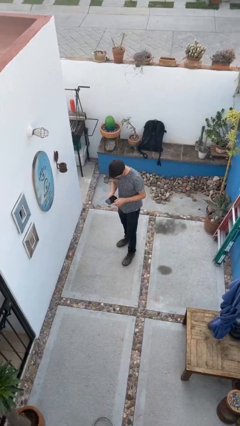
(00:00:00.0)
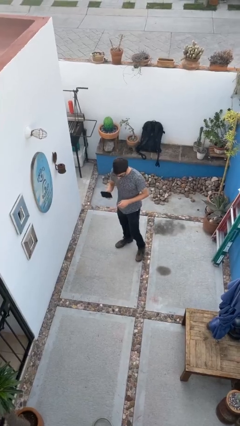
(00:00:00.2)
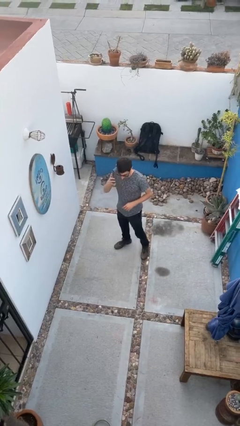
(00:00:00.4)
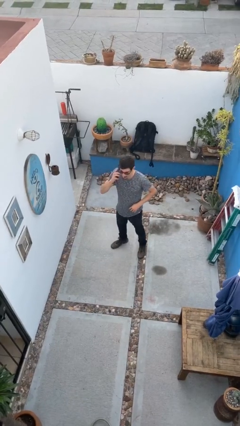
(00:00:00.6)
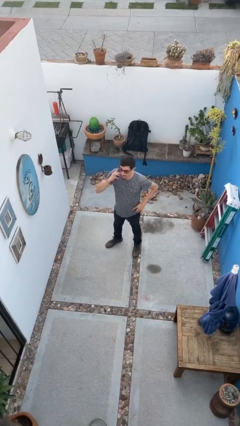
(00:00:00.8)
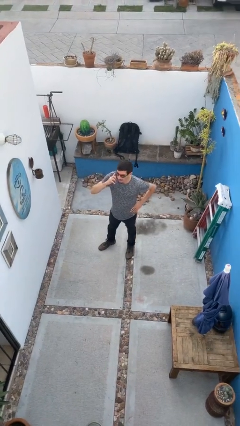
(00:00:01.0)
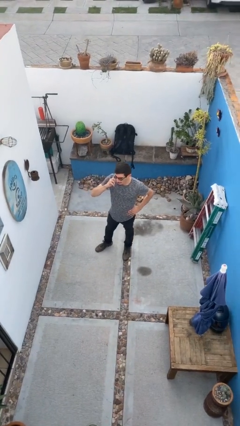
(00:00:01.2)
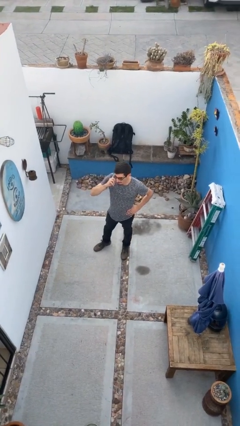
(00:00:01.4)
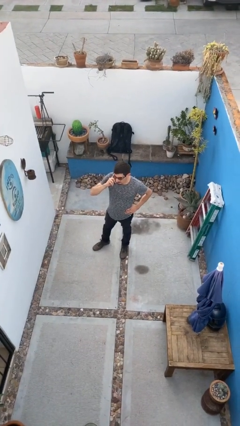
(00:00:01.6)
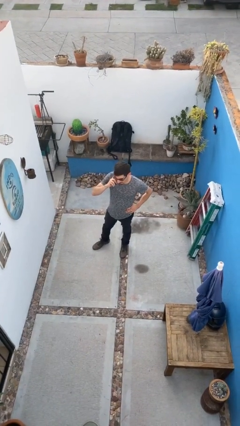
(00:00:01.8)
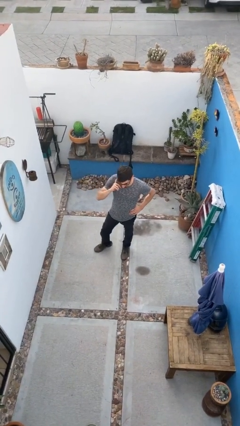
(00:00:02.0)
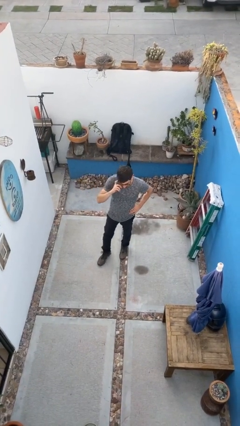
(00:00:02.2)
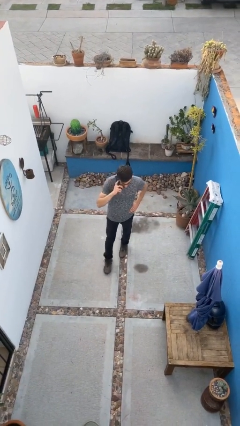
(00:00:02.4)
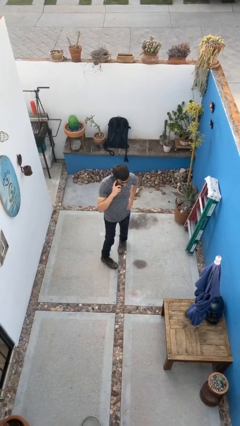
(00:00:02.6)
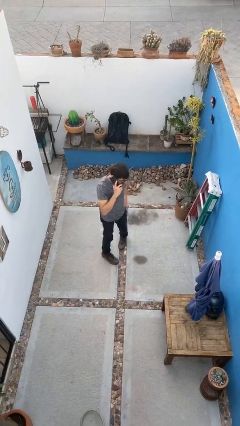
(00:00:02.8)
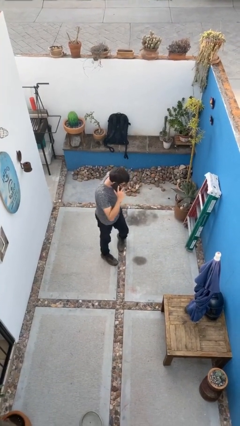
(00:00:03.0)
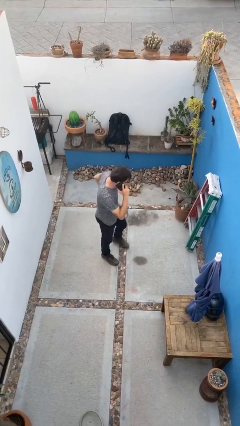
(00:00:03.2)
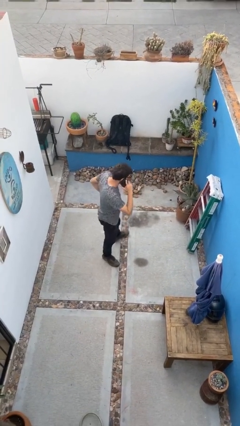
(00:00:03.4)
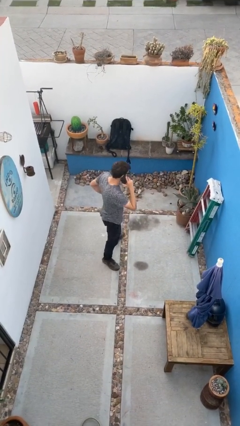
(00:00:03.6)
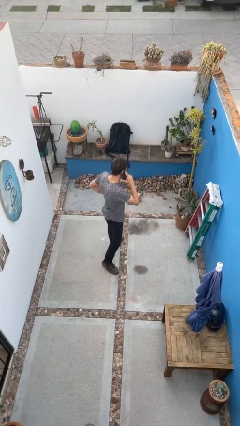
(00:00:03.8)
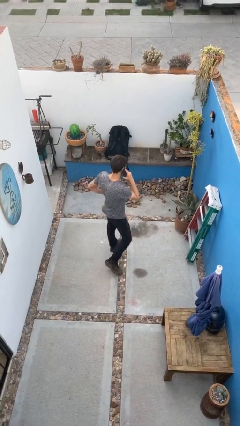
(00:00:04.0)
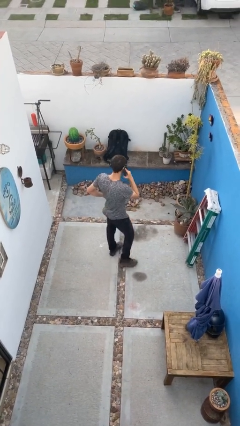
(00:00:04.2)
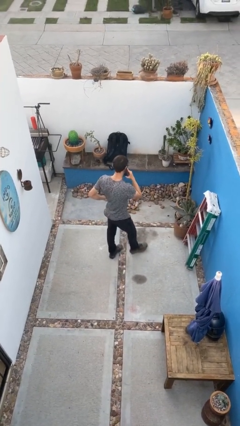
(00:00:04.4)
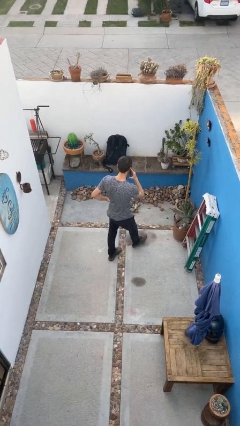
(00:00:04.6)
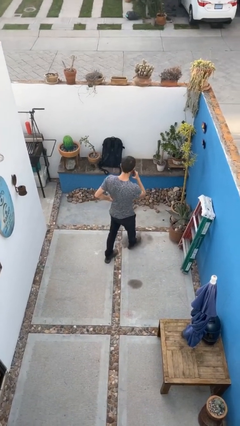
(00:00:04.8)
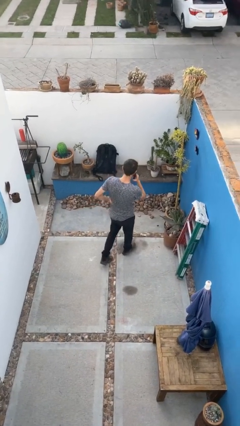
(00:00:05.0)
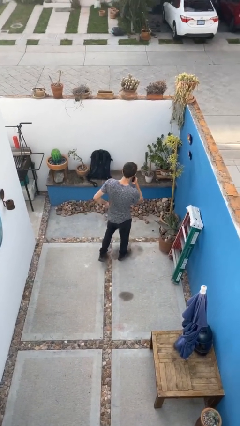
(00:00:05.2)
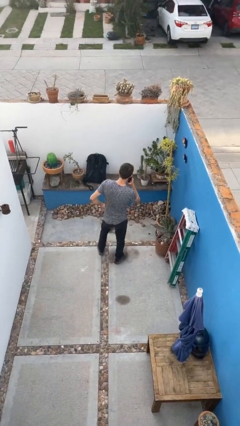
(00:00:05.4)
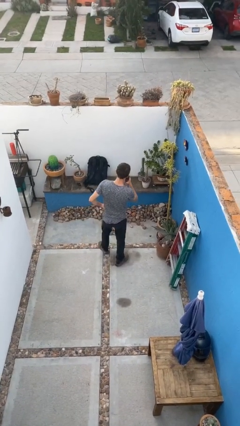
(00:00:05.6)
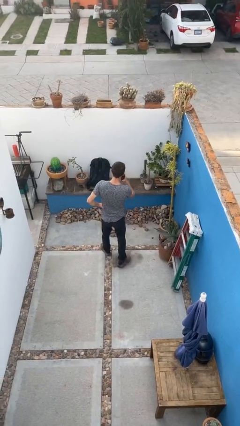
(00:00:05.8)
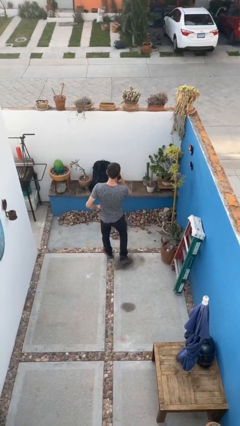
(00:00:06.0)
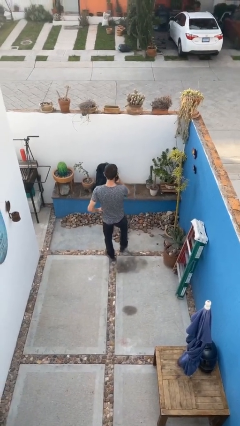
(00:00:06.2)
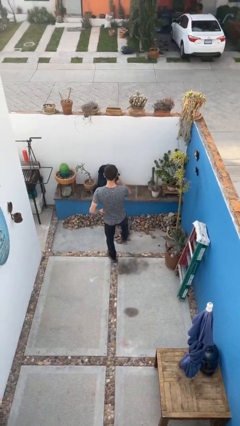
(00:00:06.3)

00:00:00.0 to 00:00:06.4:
person talks on phone

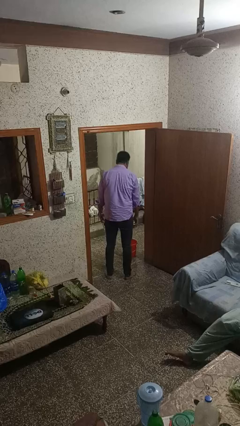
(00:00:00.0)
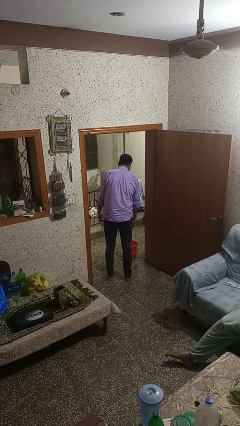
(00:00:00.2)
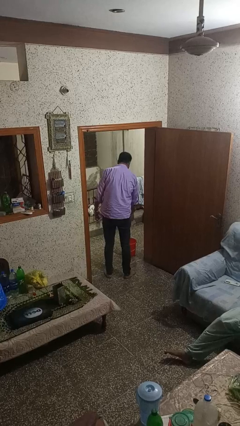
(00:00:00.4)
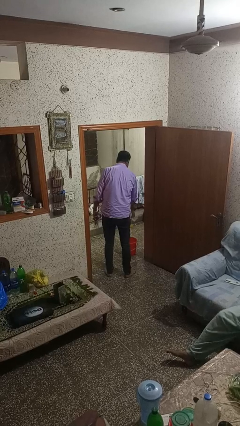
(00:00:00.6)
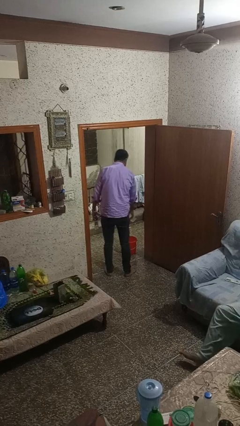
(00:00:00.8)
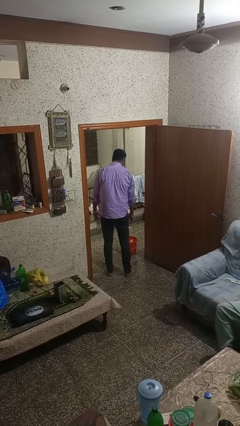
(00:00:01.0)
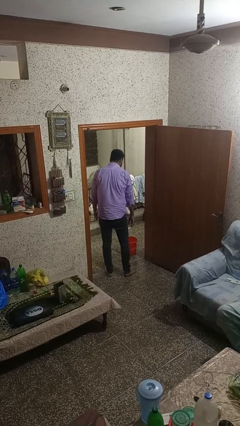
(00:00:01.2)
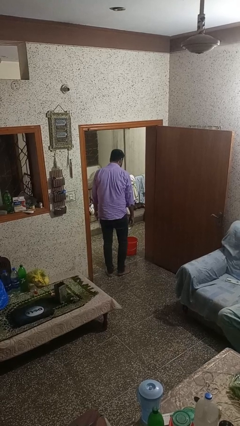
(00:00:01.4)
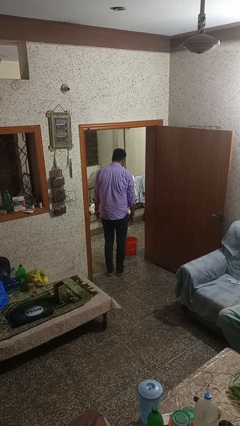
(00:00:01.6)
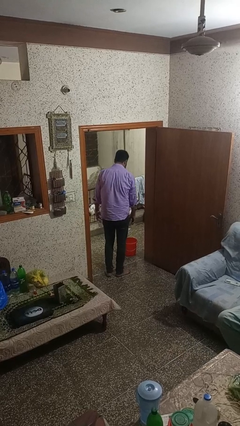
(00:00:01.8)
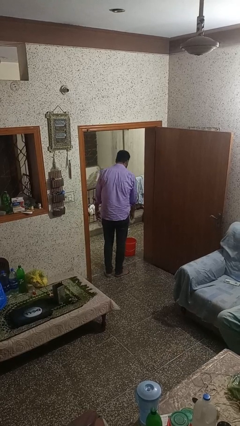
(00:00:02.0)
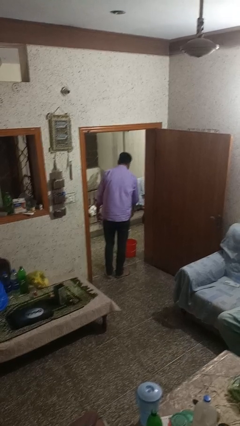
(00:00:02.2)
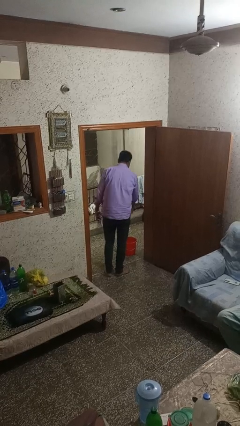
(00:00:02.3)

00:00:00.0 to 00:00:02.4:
person discards trash

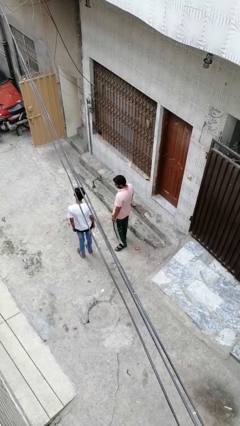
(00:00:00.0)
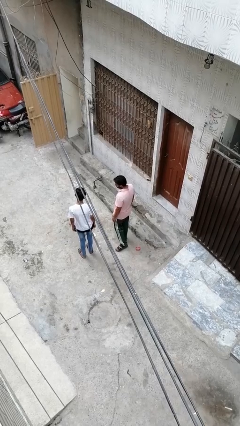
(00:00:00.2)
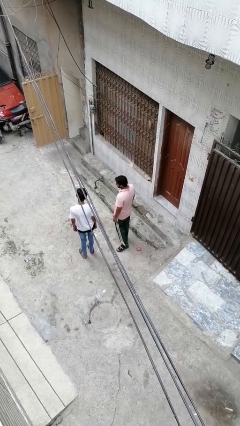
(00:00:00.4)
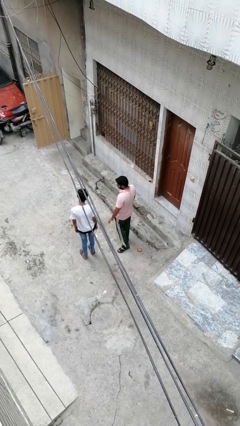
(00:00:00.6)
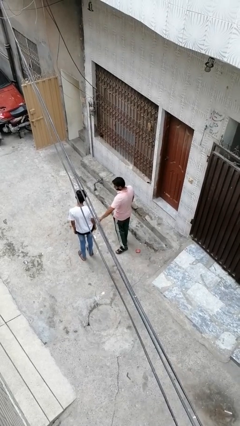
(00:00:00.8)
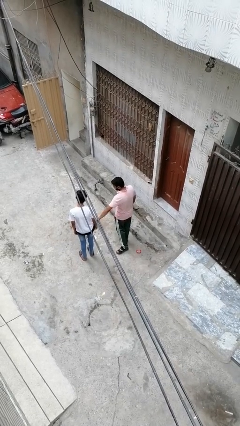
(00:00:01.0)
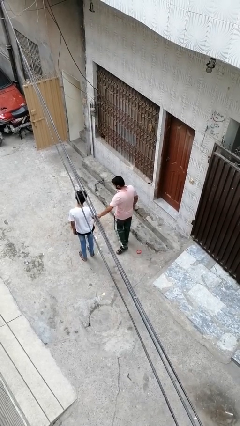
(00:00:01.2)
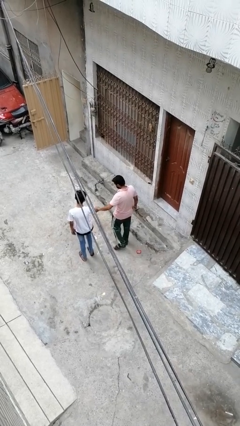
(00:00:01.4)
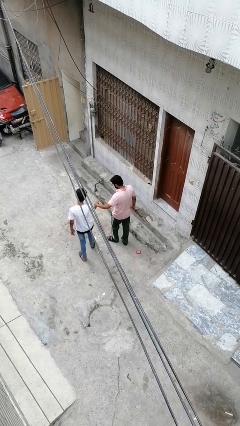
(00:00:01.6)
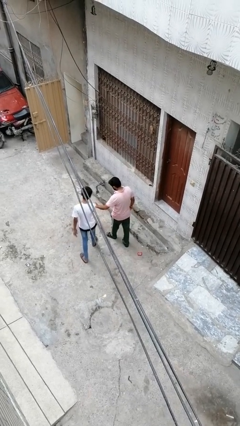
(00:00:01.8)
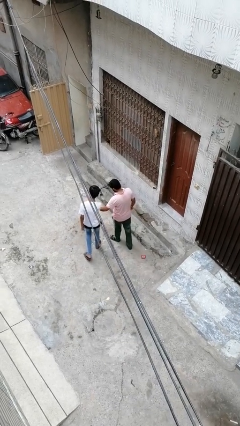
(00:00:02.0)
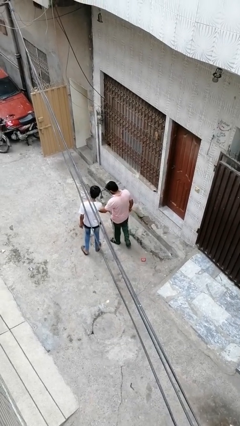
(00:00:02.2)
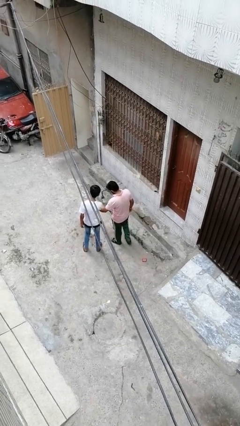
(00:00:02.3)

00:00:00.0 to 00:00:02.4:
person grabs person by forearm

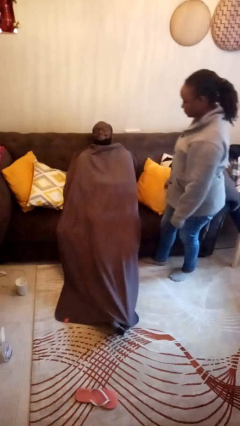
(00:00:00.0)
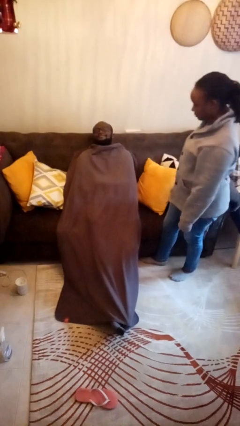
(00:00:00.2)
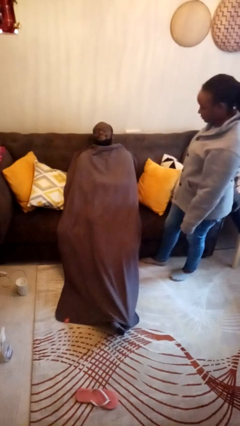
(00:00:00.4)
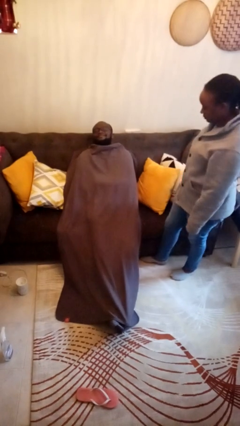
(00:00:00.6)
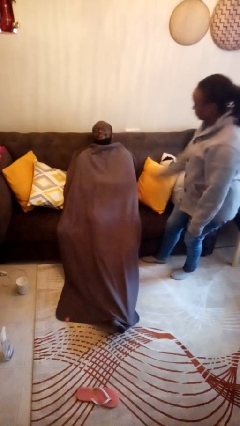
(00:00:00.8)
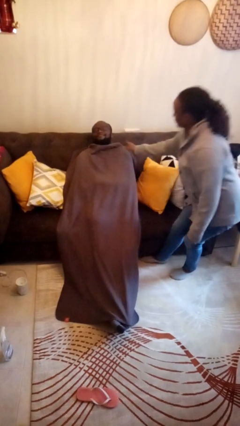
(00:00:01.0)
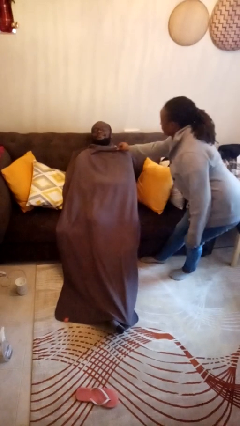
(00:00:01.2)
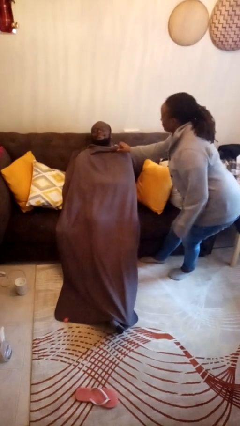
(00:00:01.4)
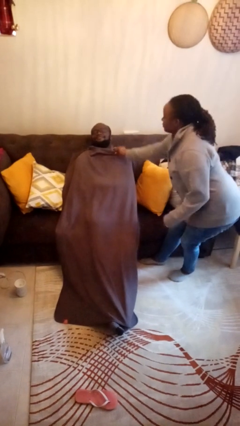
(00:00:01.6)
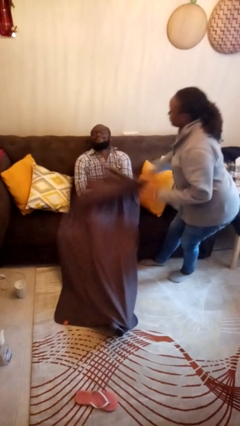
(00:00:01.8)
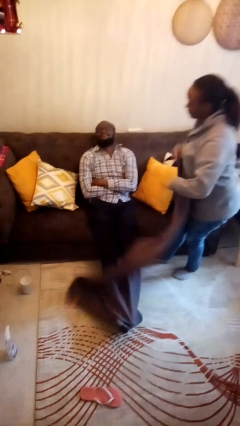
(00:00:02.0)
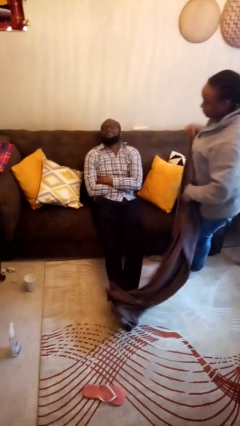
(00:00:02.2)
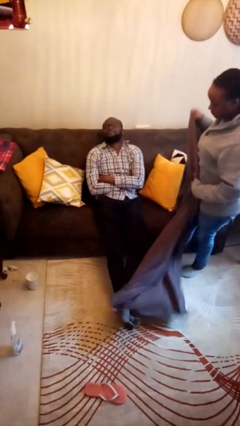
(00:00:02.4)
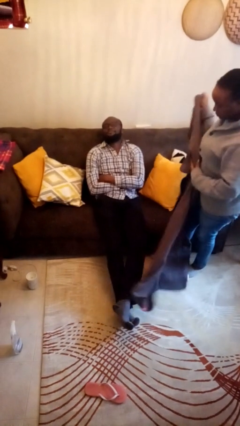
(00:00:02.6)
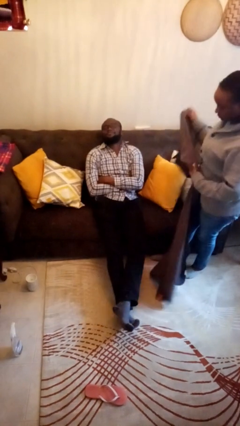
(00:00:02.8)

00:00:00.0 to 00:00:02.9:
person uncovers friend with blanket

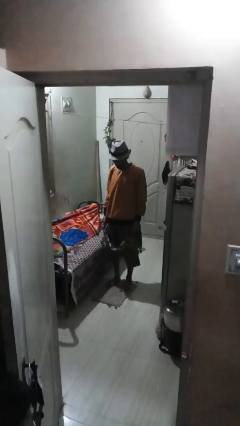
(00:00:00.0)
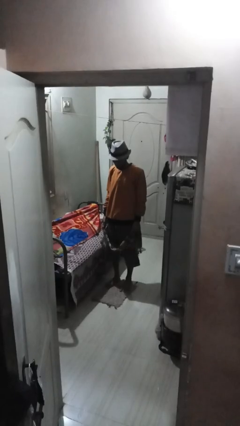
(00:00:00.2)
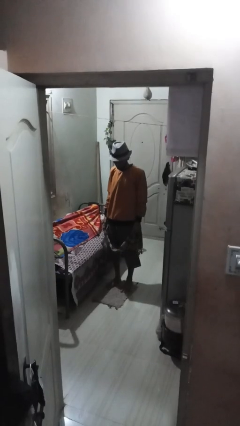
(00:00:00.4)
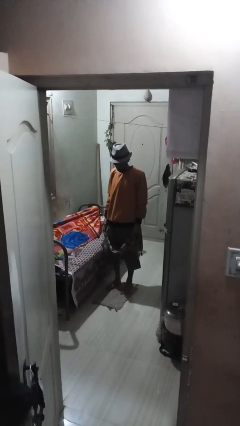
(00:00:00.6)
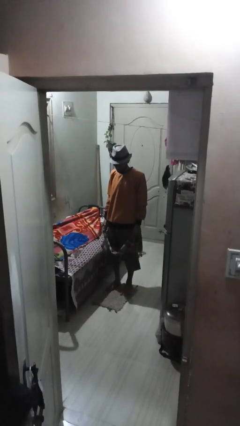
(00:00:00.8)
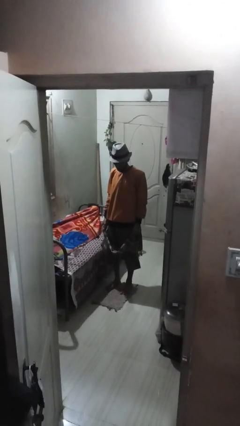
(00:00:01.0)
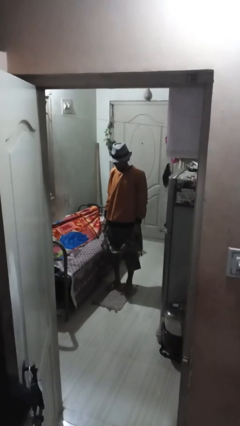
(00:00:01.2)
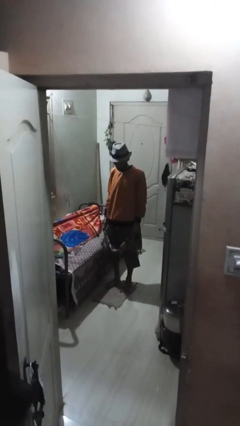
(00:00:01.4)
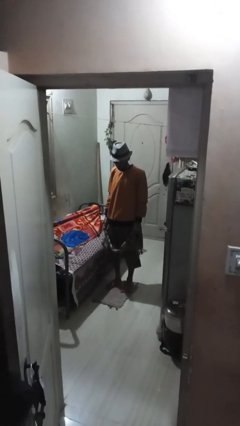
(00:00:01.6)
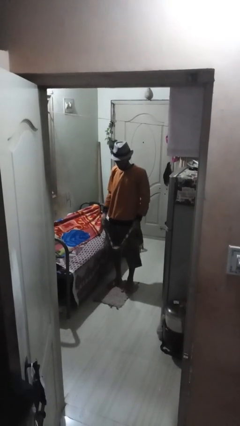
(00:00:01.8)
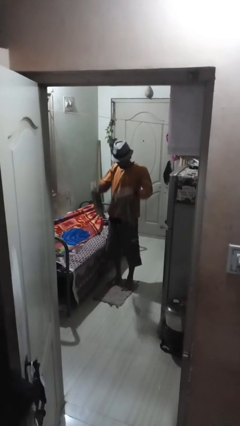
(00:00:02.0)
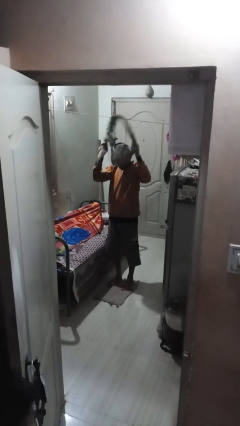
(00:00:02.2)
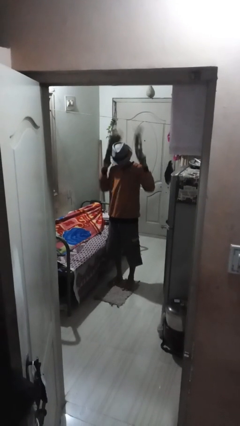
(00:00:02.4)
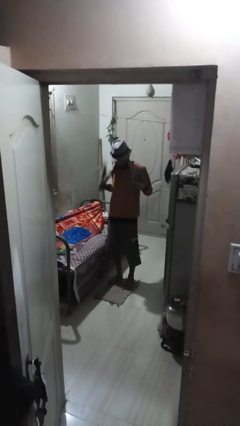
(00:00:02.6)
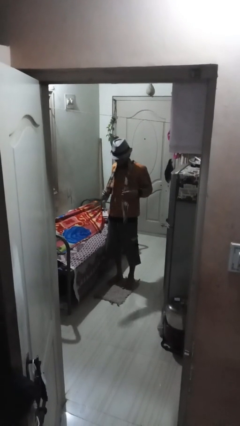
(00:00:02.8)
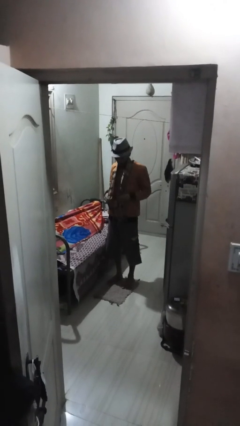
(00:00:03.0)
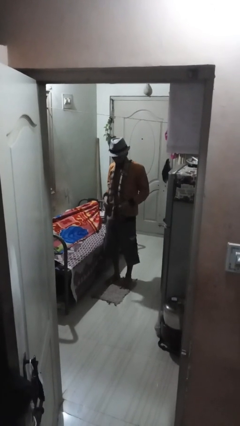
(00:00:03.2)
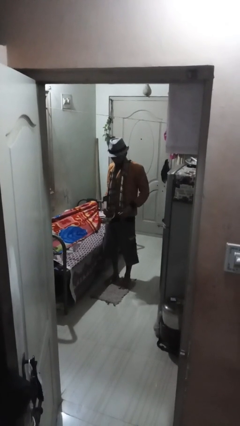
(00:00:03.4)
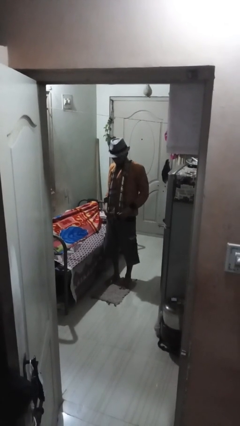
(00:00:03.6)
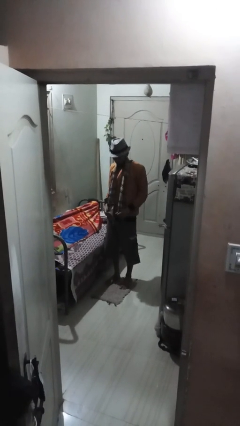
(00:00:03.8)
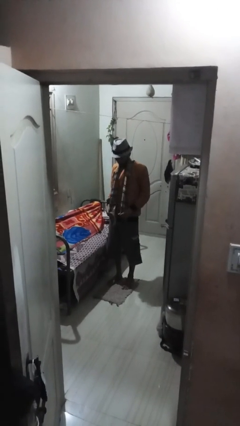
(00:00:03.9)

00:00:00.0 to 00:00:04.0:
person puts on scarf
